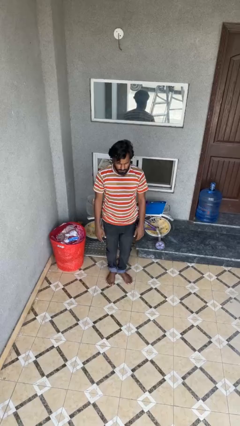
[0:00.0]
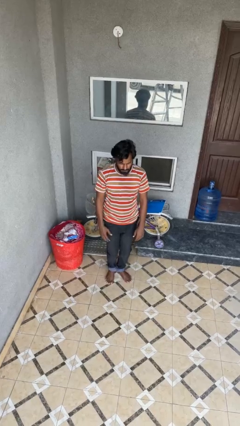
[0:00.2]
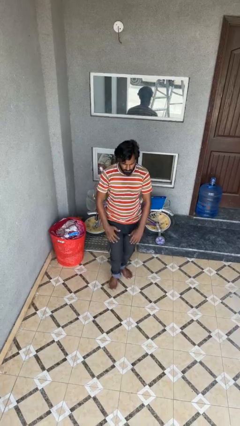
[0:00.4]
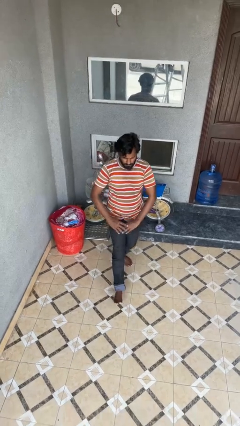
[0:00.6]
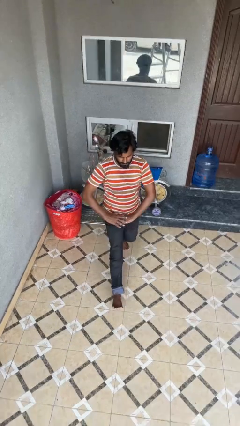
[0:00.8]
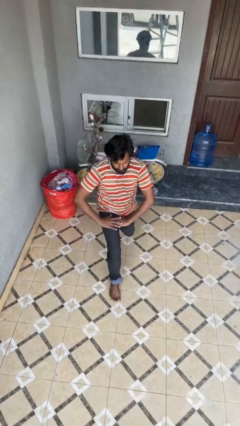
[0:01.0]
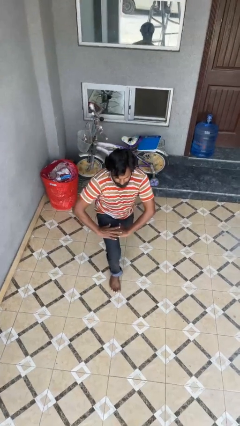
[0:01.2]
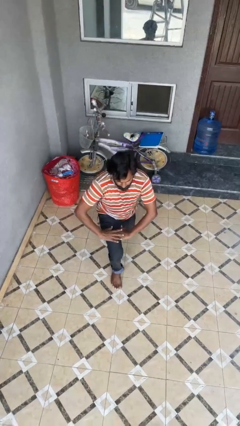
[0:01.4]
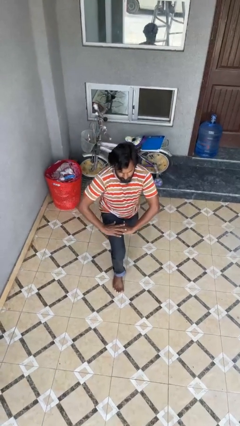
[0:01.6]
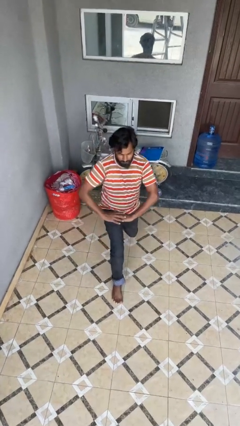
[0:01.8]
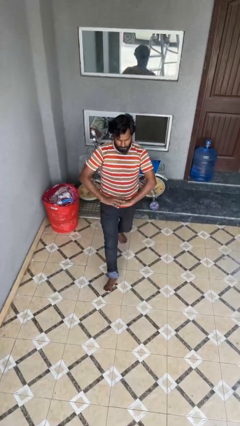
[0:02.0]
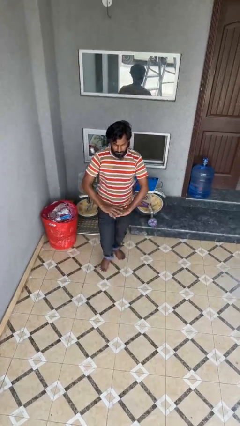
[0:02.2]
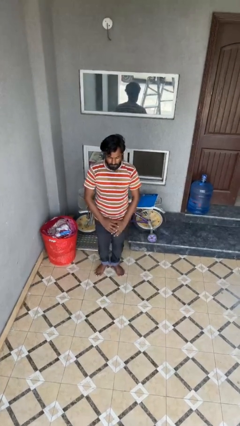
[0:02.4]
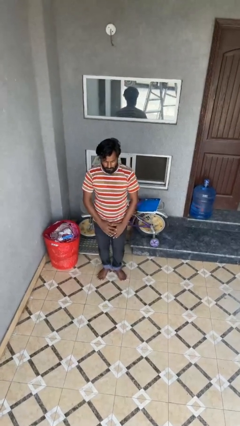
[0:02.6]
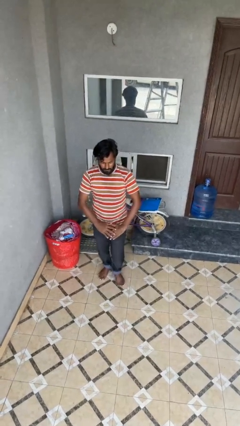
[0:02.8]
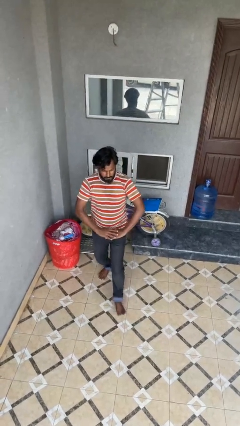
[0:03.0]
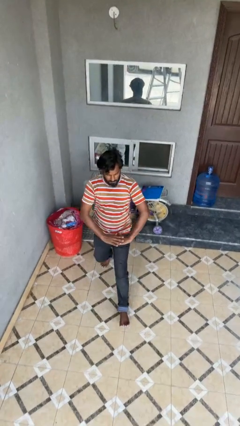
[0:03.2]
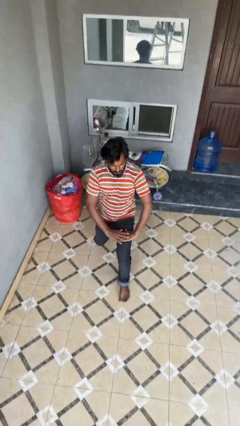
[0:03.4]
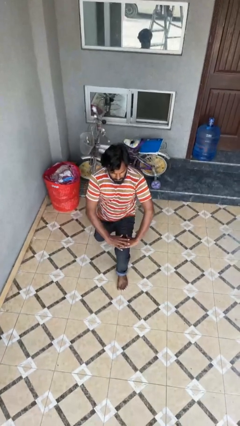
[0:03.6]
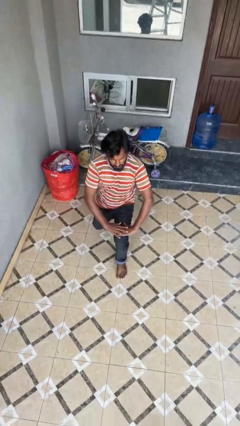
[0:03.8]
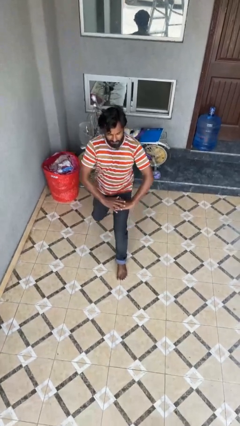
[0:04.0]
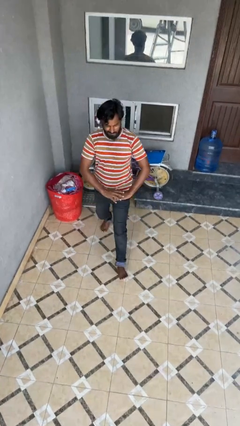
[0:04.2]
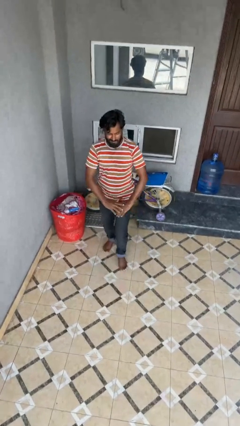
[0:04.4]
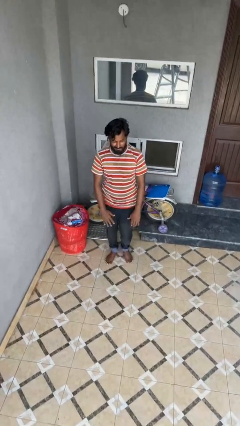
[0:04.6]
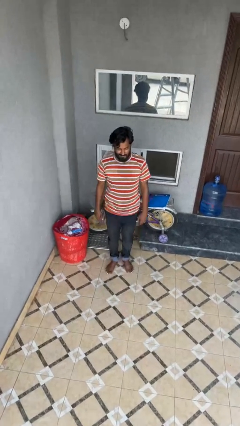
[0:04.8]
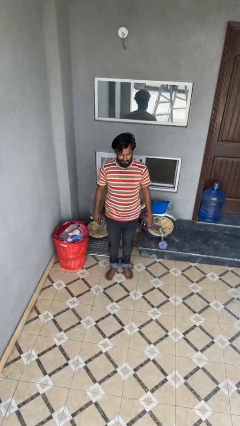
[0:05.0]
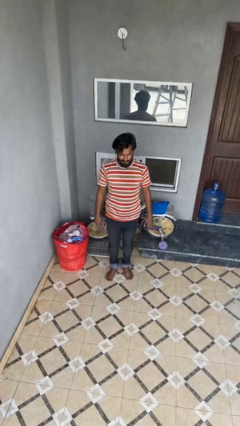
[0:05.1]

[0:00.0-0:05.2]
person exercises with lunges

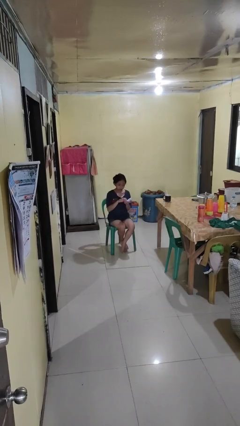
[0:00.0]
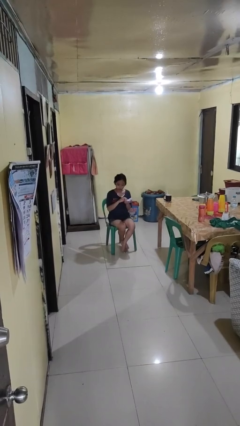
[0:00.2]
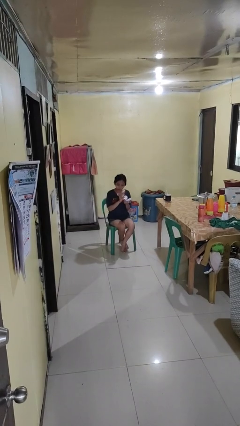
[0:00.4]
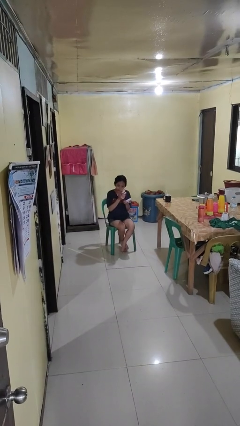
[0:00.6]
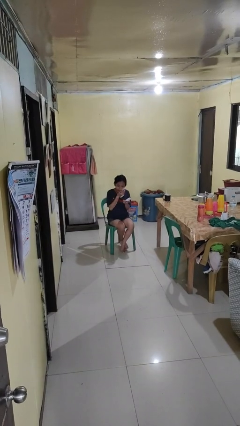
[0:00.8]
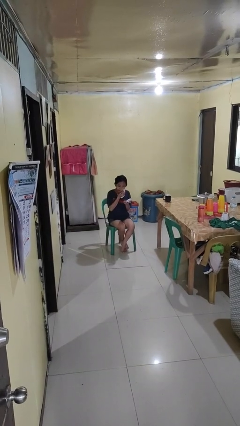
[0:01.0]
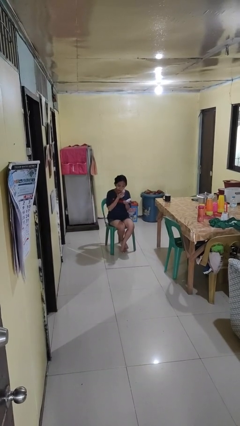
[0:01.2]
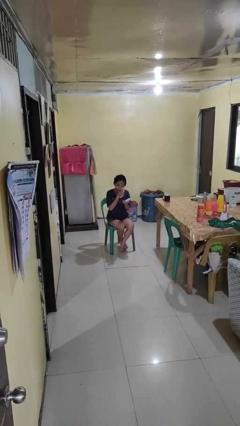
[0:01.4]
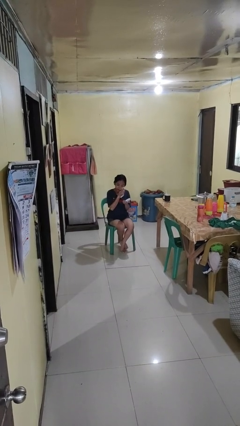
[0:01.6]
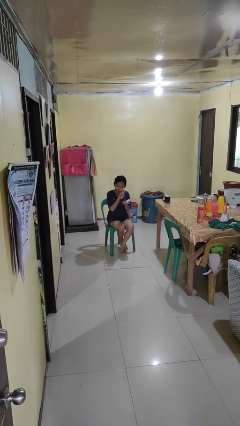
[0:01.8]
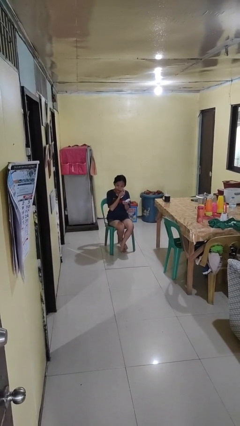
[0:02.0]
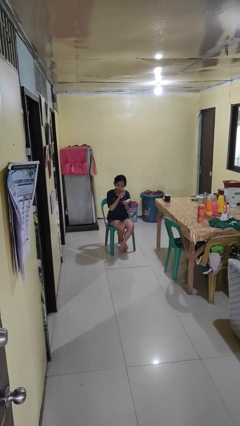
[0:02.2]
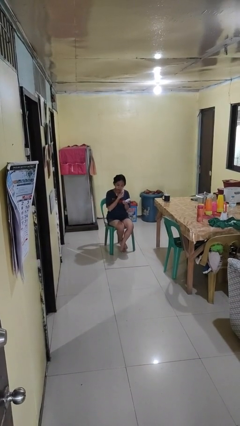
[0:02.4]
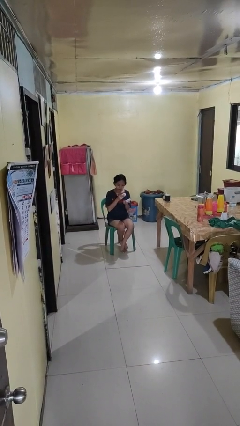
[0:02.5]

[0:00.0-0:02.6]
person applies foundation makeup

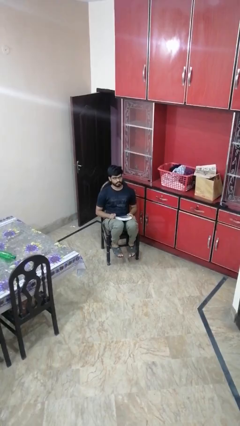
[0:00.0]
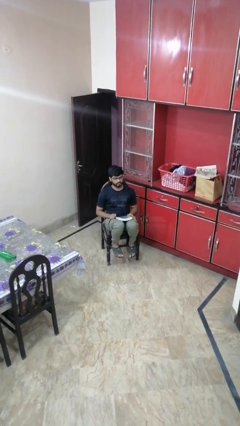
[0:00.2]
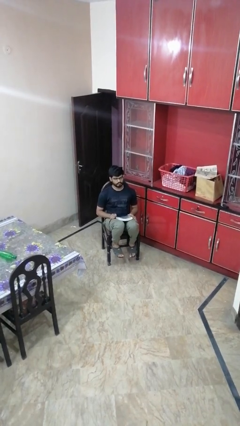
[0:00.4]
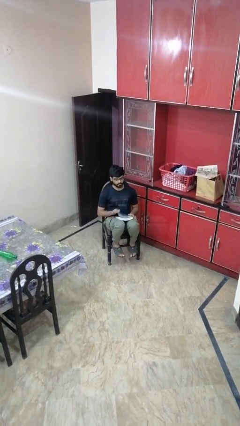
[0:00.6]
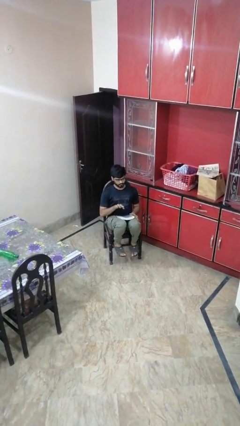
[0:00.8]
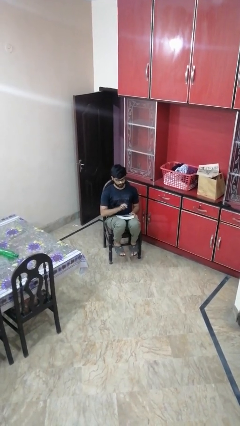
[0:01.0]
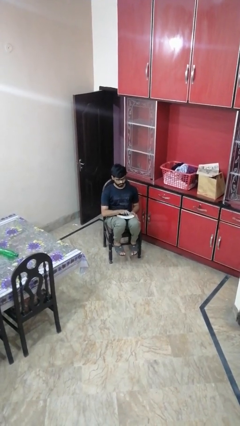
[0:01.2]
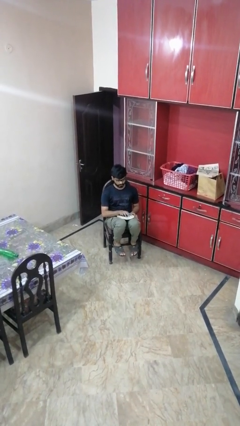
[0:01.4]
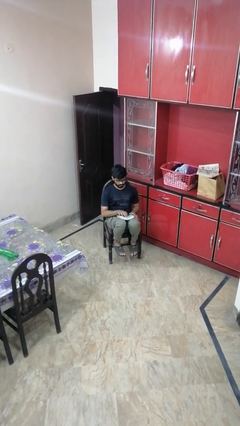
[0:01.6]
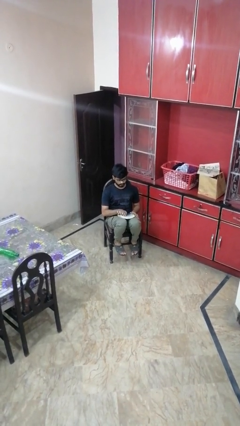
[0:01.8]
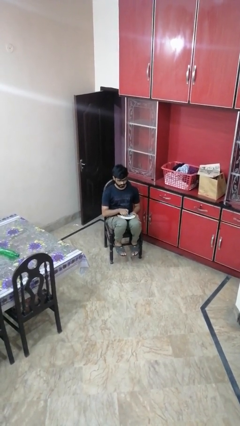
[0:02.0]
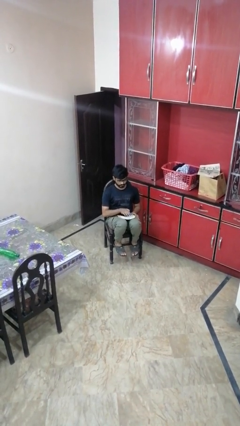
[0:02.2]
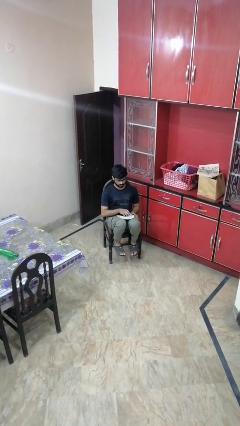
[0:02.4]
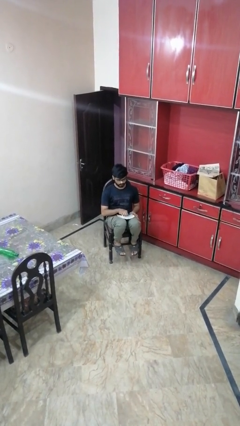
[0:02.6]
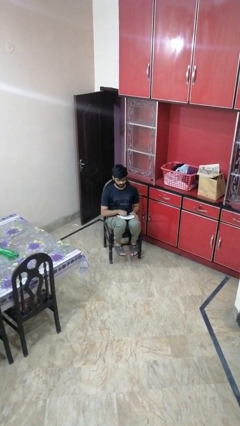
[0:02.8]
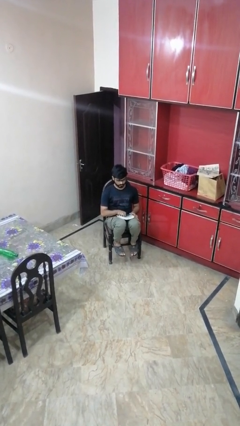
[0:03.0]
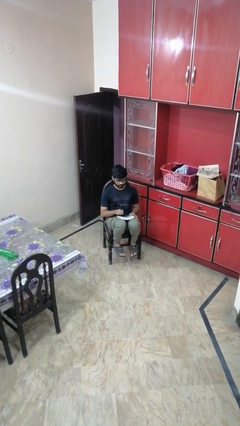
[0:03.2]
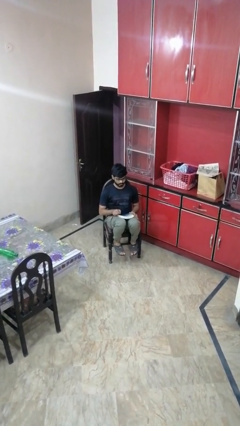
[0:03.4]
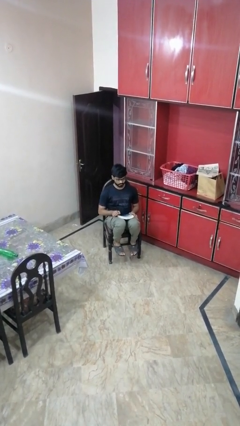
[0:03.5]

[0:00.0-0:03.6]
person taps object with finger

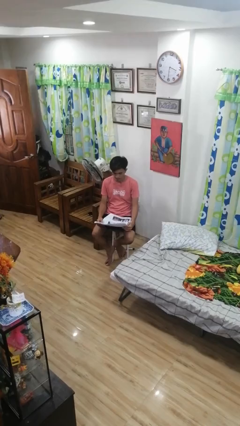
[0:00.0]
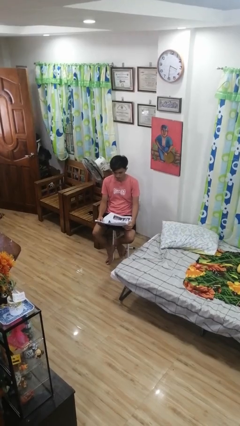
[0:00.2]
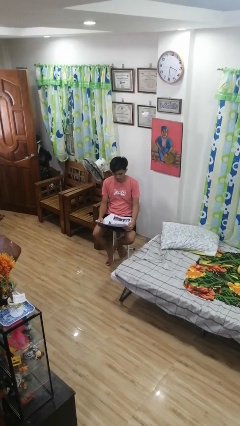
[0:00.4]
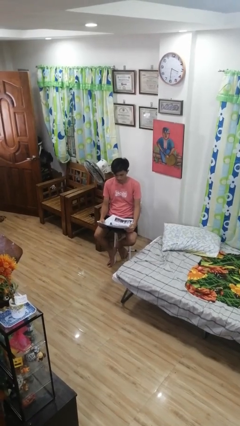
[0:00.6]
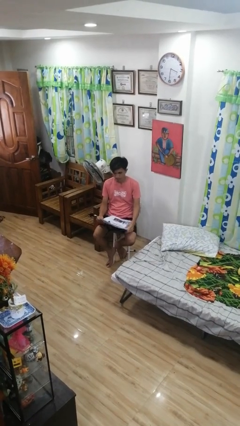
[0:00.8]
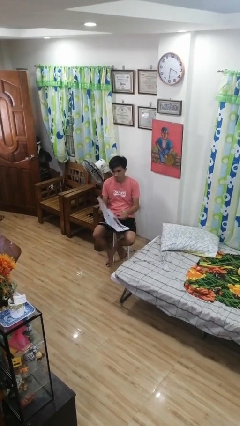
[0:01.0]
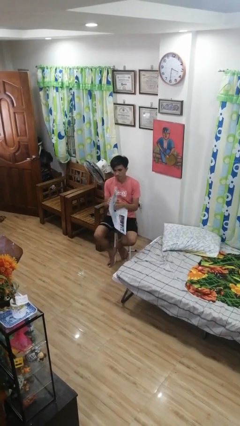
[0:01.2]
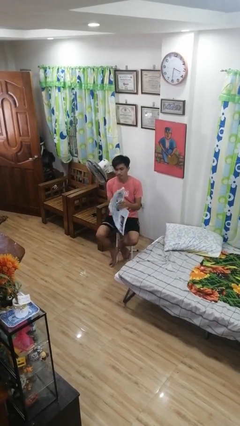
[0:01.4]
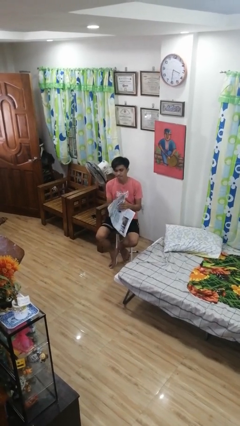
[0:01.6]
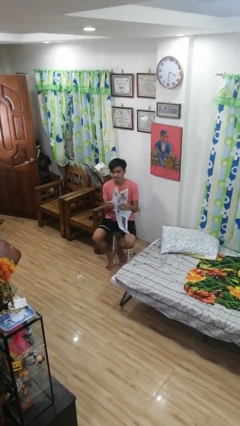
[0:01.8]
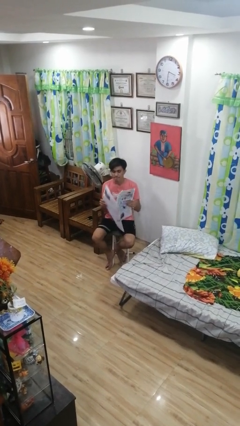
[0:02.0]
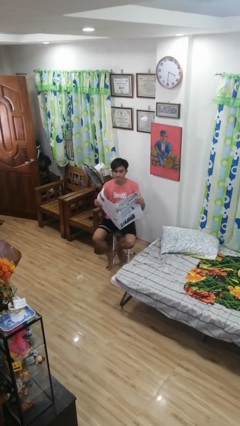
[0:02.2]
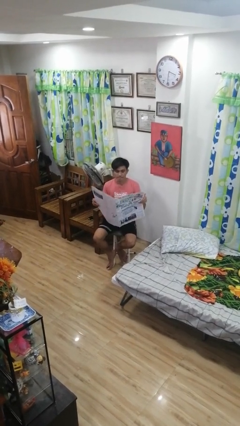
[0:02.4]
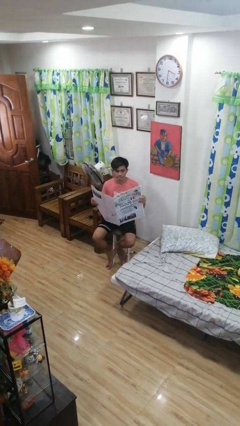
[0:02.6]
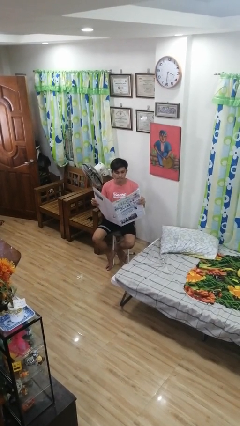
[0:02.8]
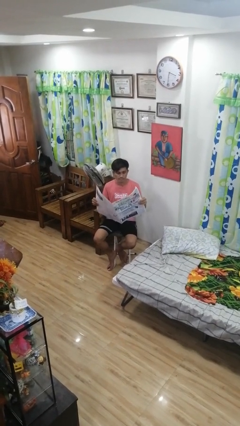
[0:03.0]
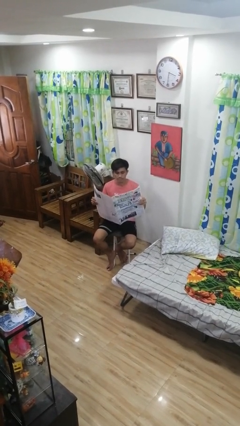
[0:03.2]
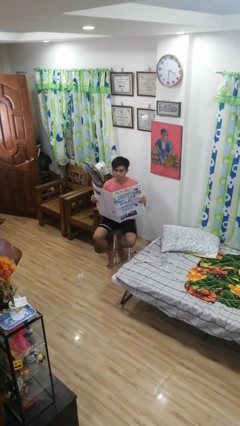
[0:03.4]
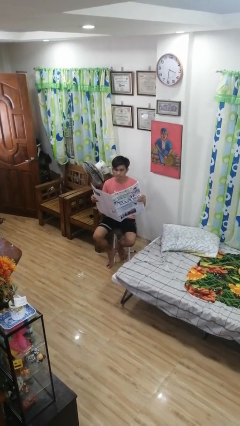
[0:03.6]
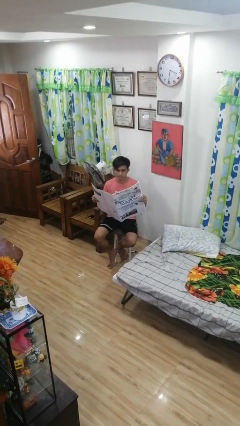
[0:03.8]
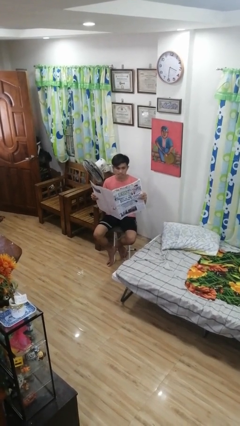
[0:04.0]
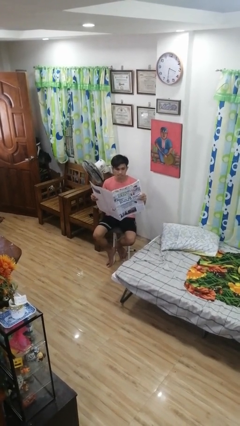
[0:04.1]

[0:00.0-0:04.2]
person reads newspaper

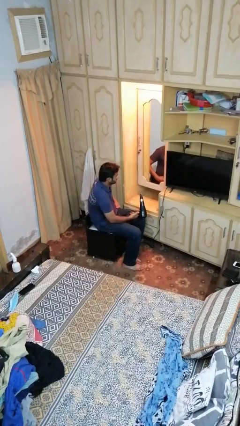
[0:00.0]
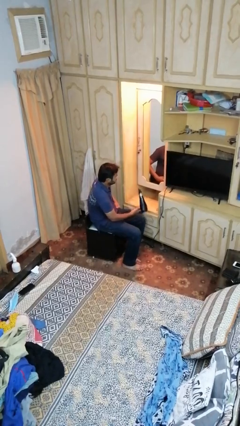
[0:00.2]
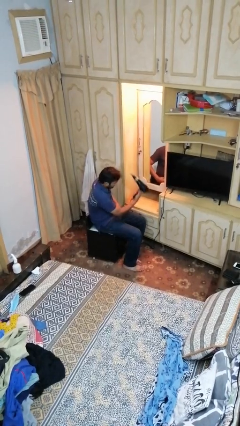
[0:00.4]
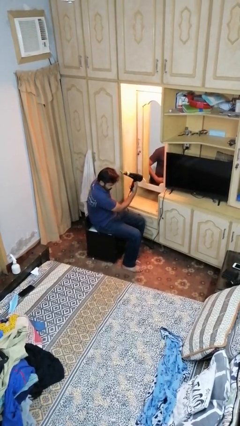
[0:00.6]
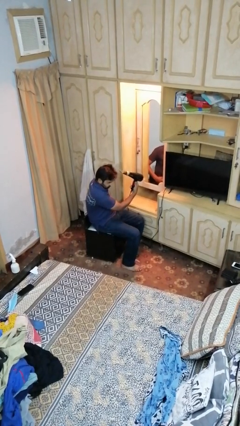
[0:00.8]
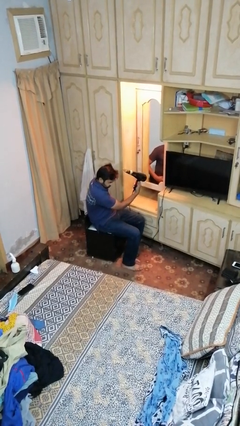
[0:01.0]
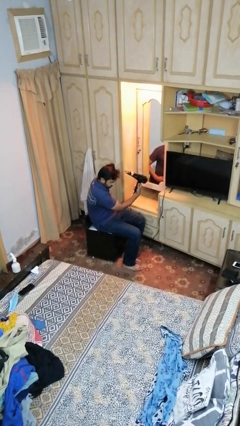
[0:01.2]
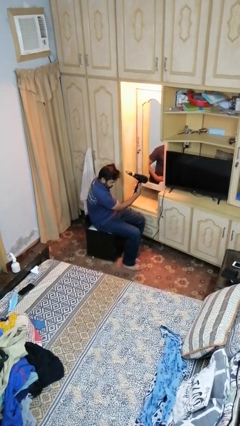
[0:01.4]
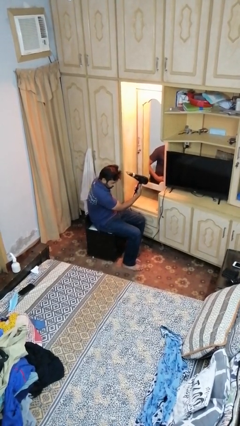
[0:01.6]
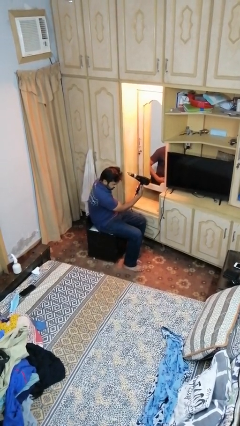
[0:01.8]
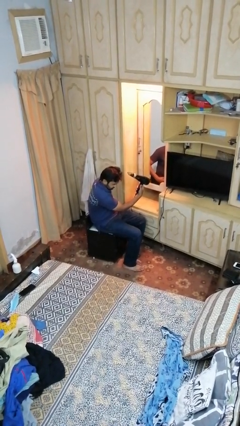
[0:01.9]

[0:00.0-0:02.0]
person dries hair with hairdryer
